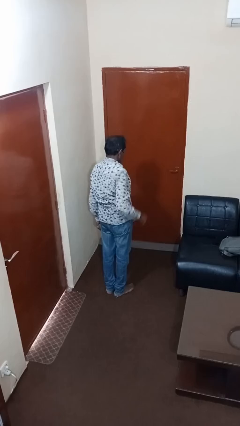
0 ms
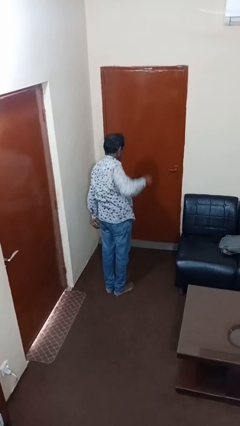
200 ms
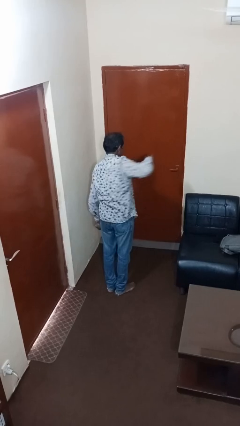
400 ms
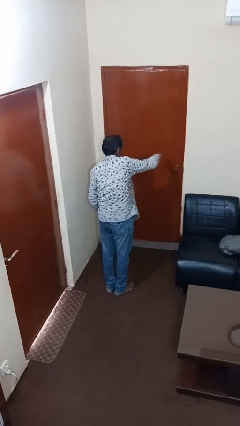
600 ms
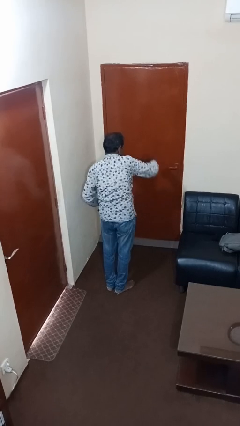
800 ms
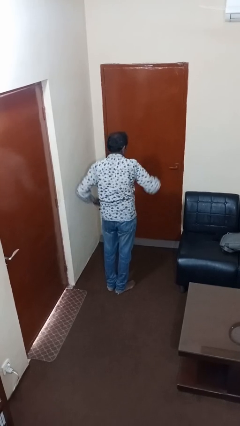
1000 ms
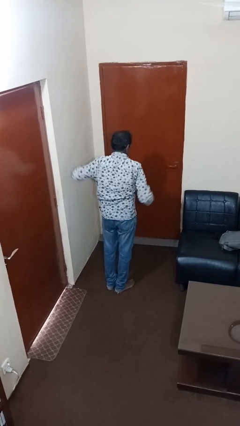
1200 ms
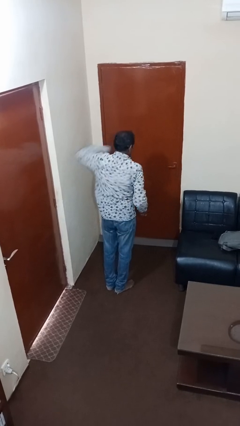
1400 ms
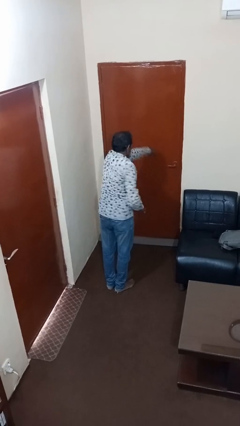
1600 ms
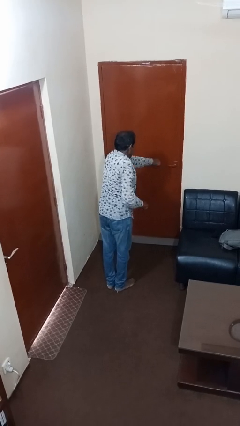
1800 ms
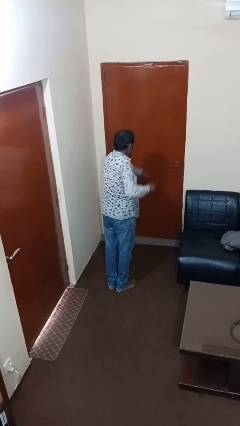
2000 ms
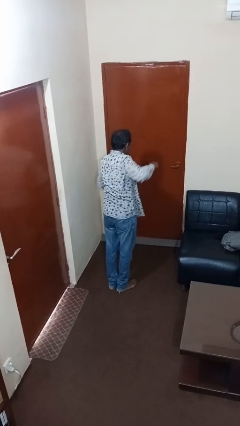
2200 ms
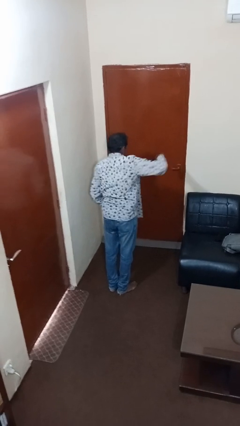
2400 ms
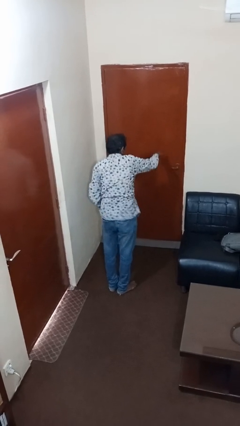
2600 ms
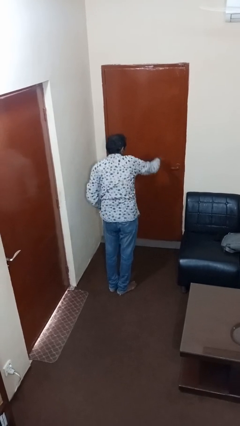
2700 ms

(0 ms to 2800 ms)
person punches

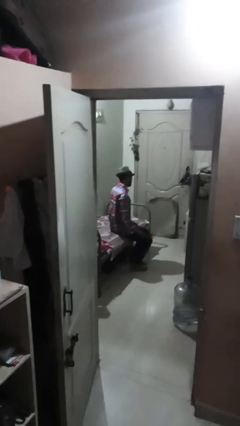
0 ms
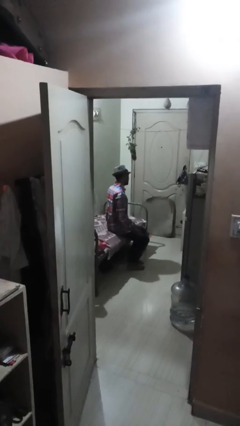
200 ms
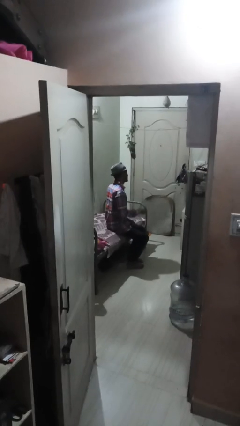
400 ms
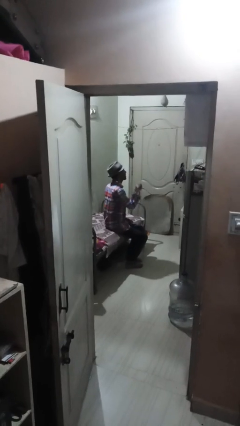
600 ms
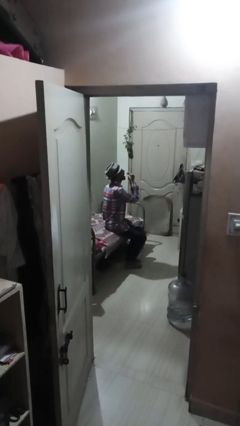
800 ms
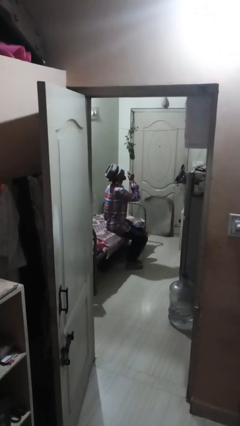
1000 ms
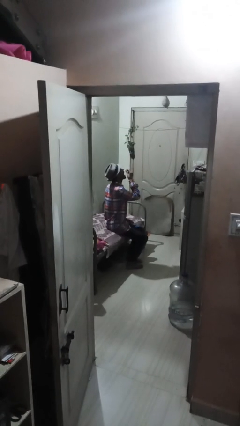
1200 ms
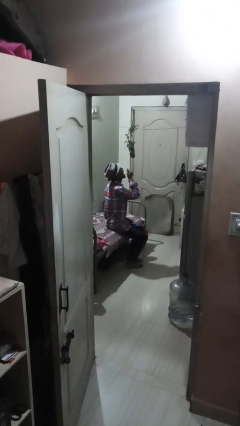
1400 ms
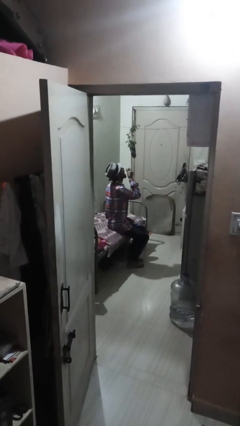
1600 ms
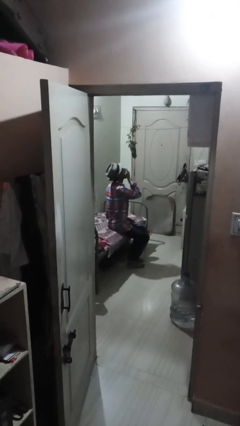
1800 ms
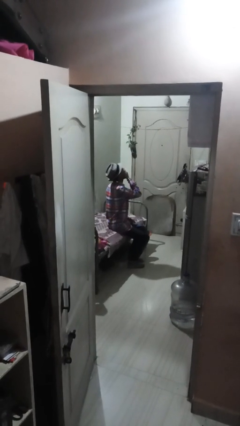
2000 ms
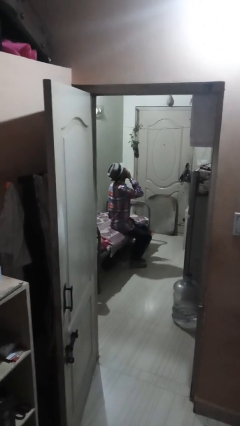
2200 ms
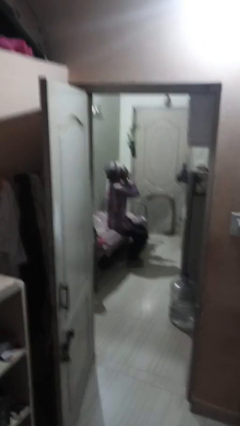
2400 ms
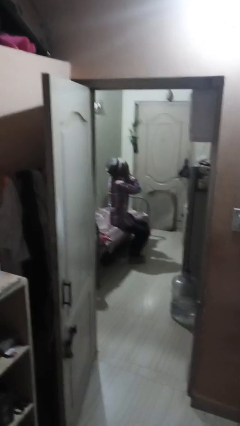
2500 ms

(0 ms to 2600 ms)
person yawns

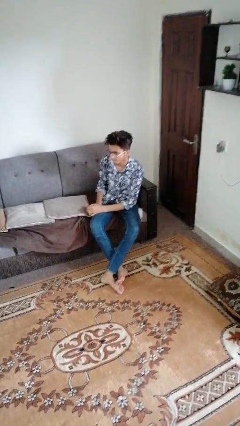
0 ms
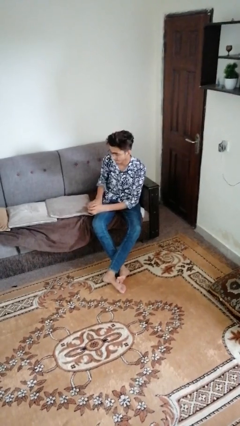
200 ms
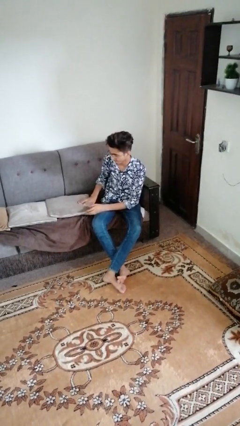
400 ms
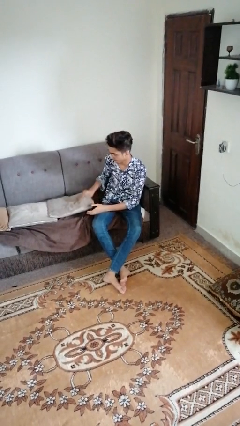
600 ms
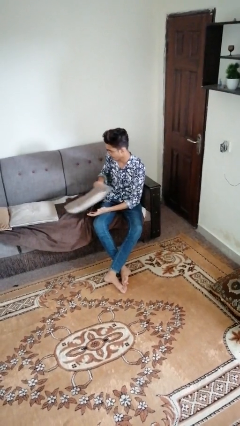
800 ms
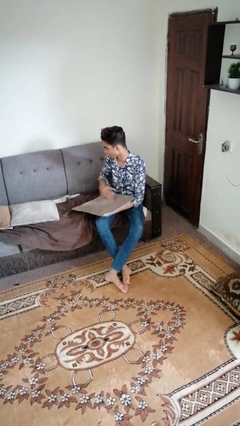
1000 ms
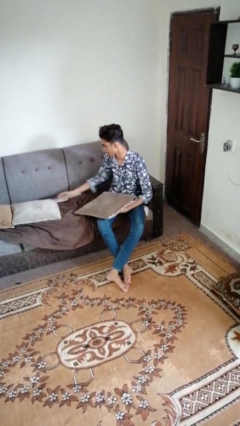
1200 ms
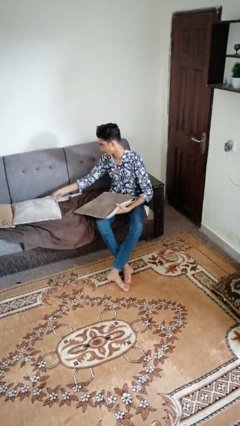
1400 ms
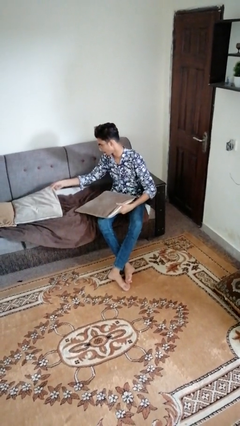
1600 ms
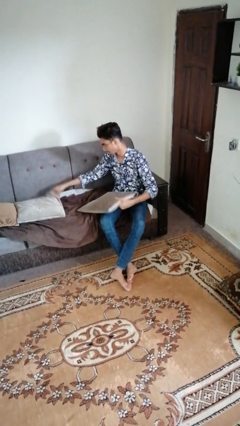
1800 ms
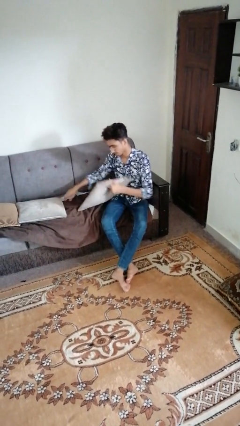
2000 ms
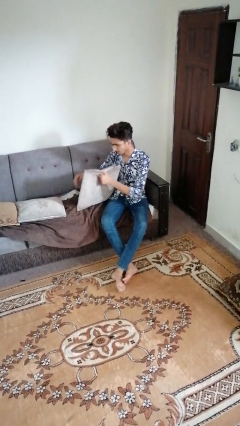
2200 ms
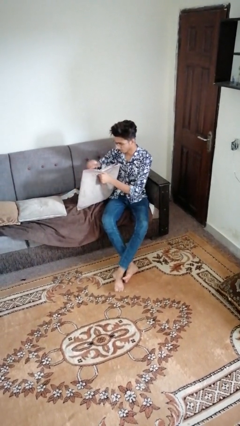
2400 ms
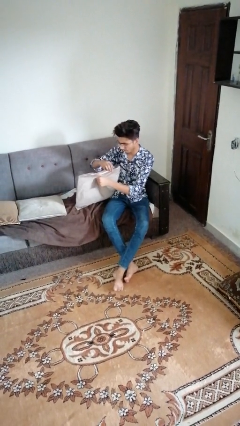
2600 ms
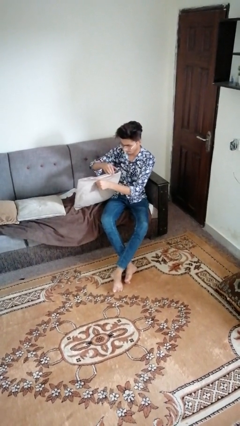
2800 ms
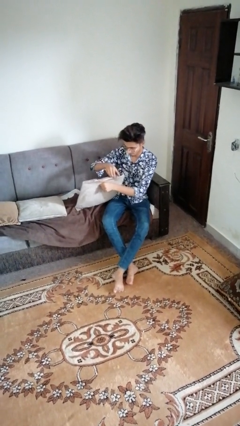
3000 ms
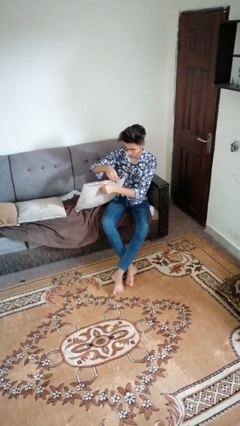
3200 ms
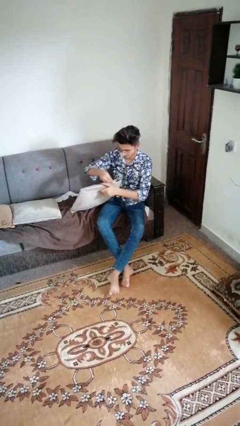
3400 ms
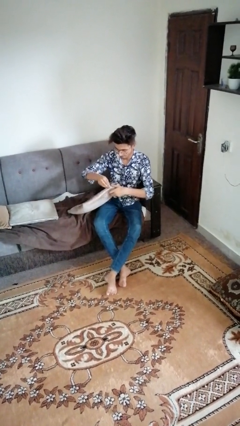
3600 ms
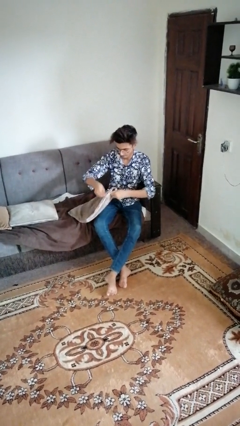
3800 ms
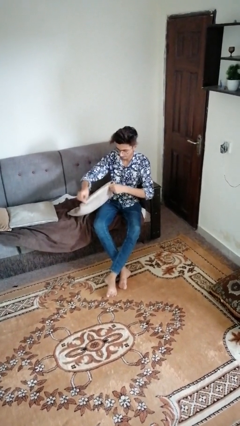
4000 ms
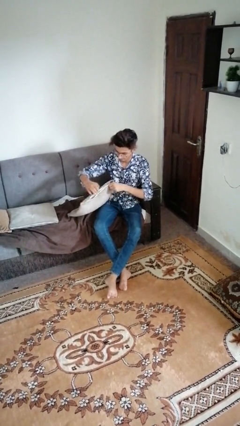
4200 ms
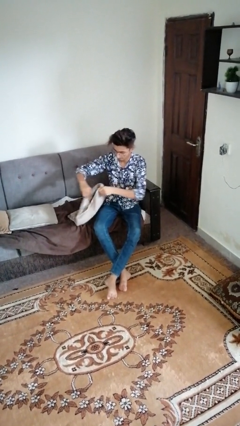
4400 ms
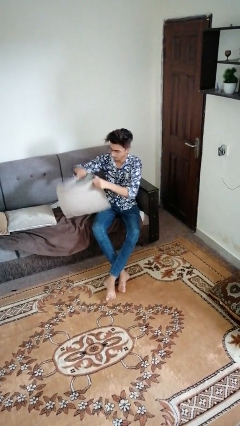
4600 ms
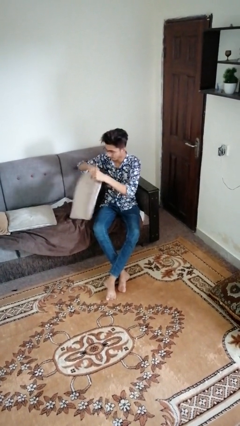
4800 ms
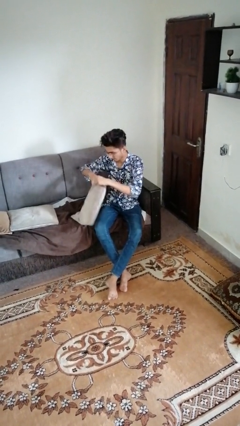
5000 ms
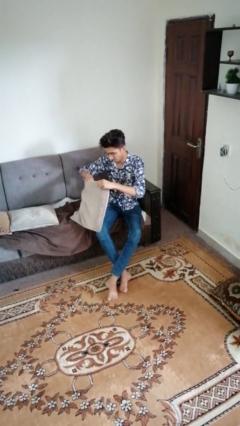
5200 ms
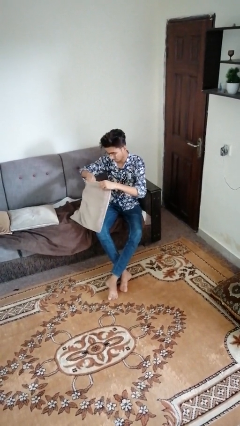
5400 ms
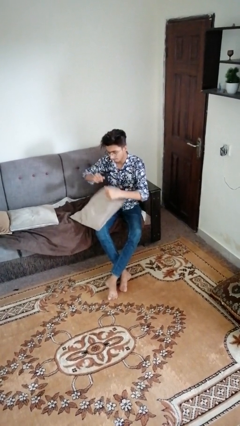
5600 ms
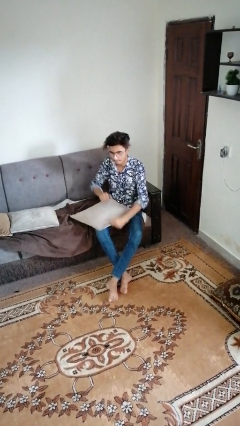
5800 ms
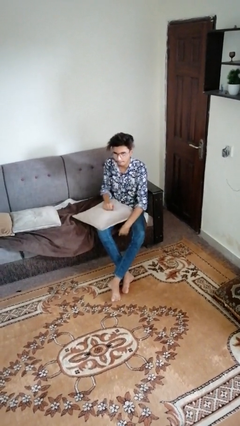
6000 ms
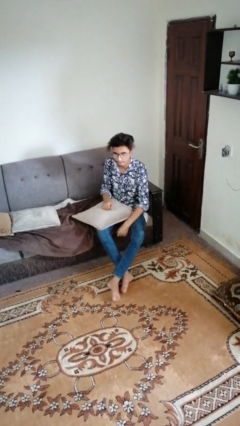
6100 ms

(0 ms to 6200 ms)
person searches in couch

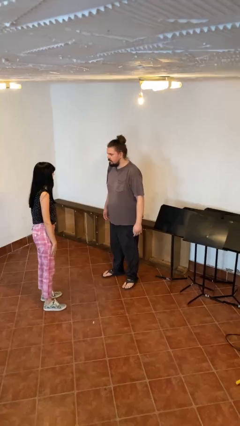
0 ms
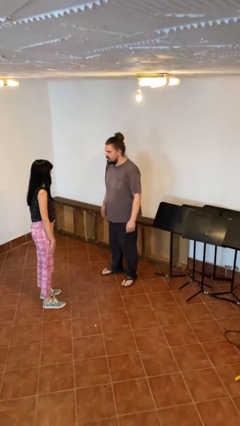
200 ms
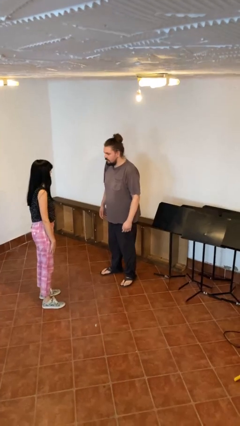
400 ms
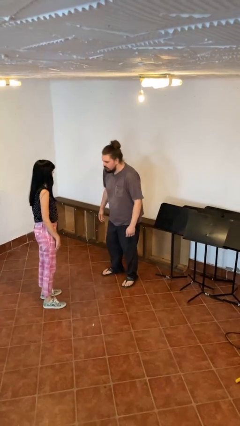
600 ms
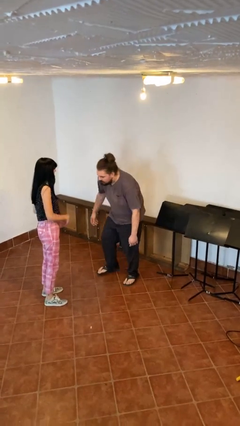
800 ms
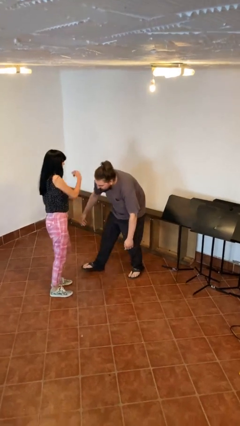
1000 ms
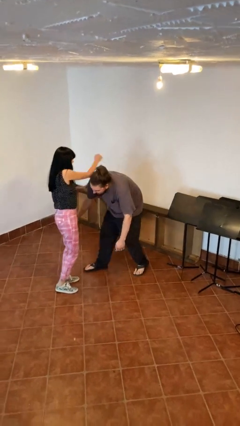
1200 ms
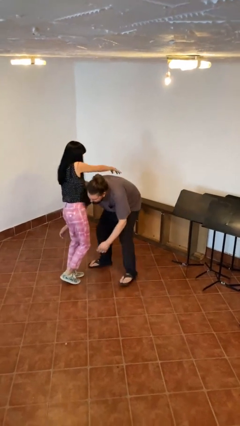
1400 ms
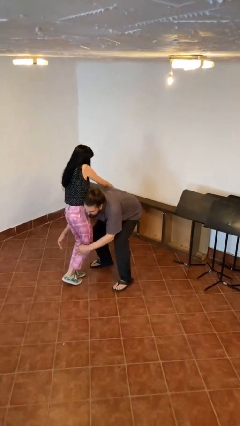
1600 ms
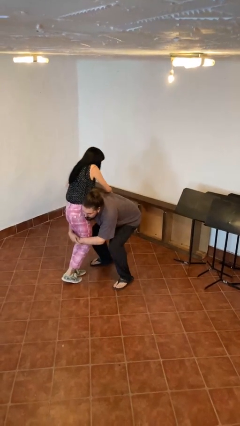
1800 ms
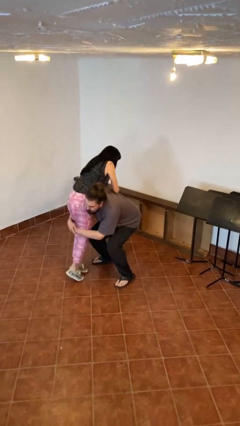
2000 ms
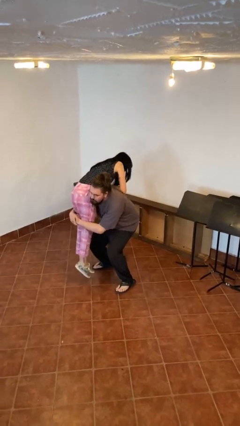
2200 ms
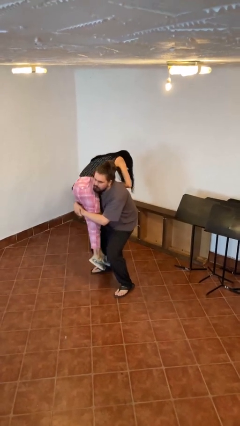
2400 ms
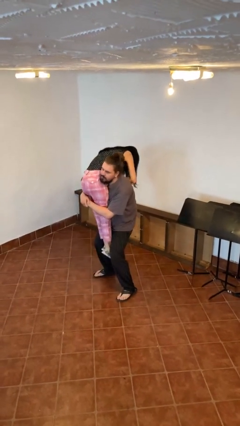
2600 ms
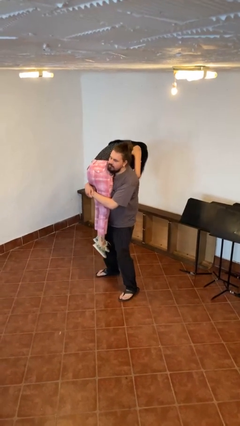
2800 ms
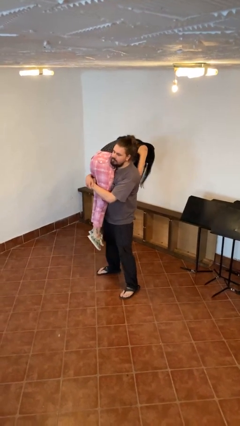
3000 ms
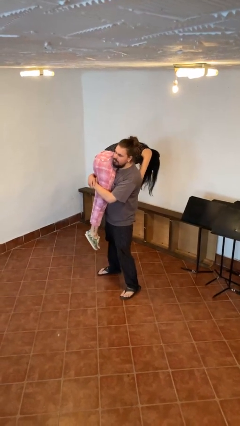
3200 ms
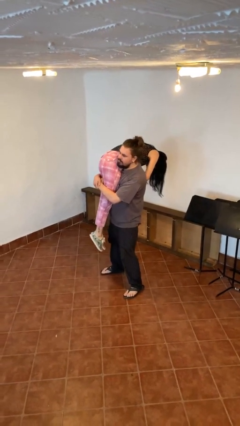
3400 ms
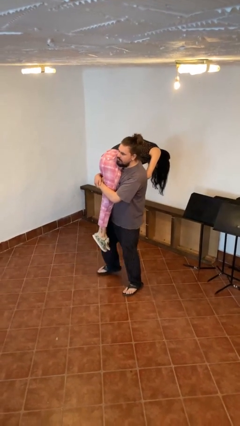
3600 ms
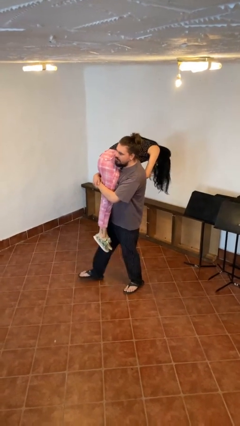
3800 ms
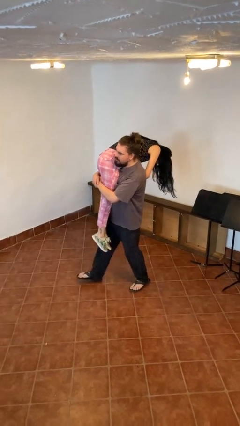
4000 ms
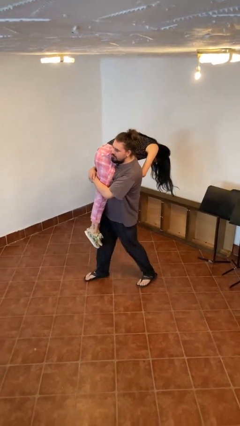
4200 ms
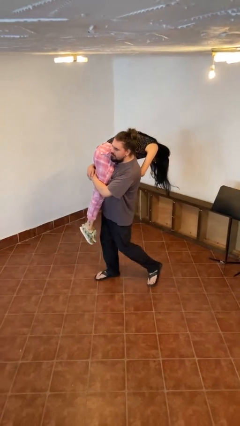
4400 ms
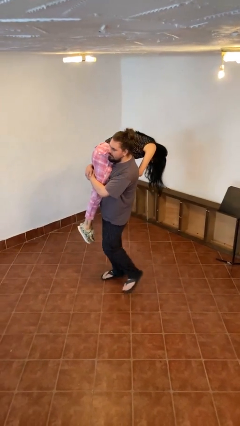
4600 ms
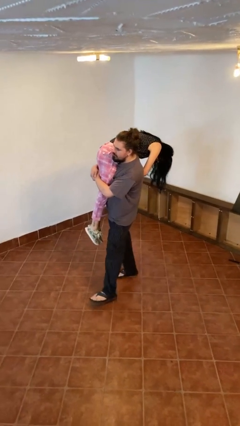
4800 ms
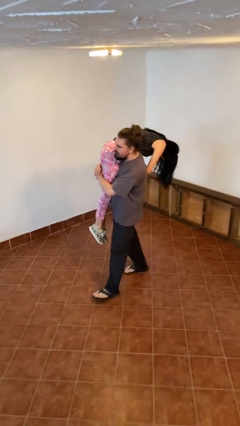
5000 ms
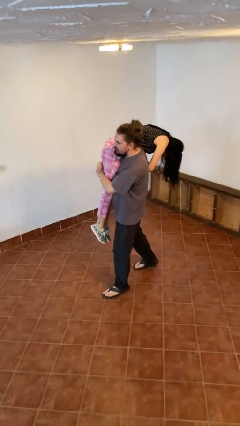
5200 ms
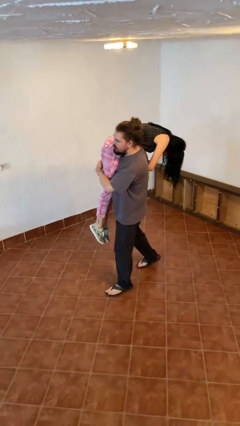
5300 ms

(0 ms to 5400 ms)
person carries person over shoulder

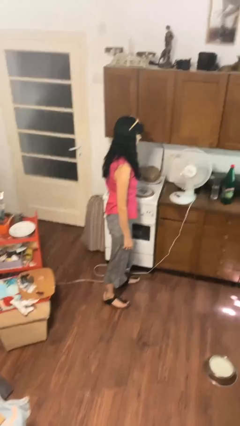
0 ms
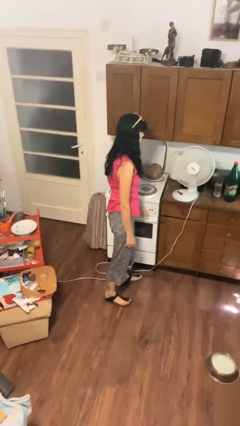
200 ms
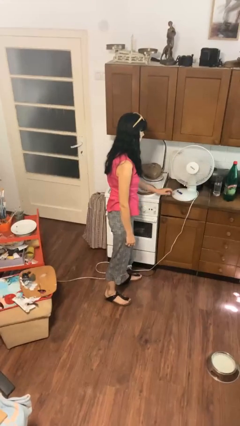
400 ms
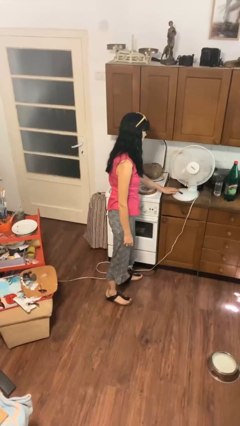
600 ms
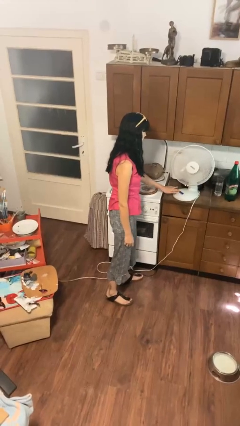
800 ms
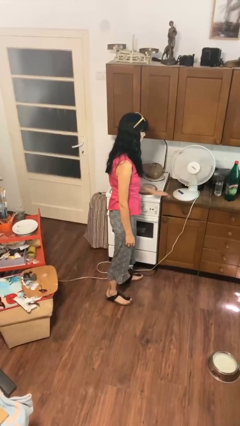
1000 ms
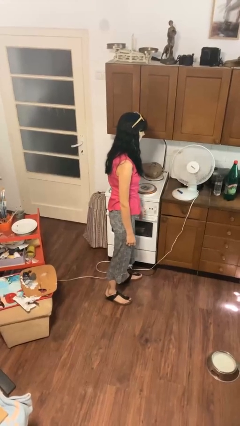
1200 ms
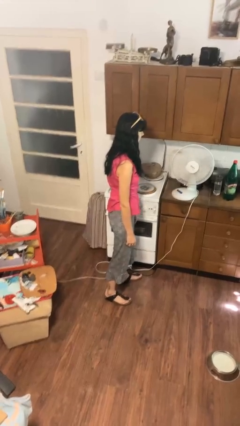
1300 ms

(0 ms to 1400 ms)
person turns off fan
